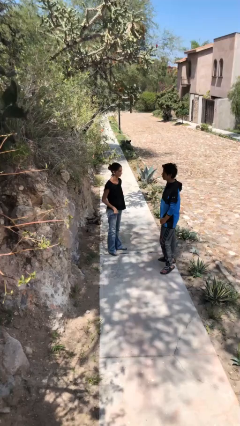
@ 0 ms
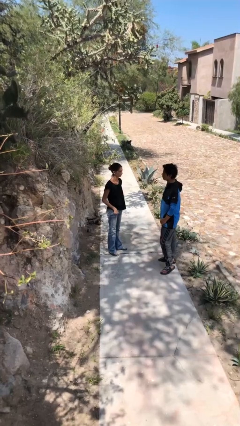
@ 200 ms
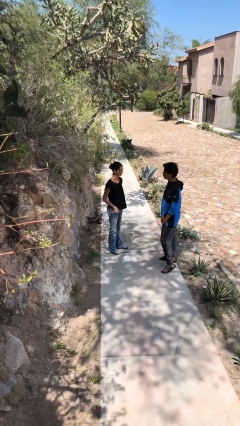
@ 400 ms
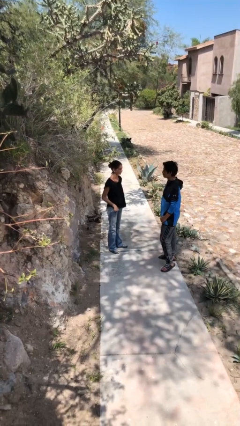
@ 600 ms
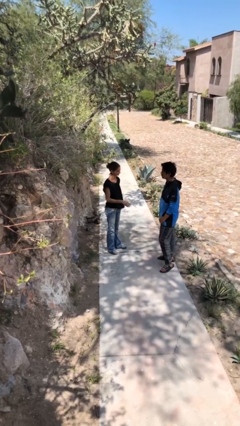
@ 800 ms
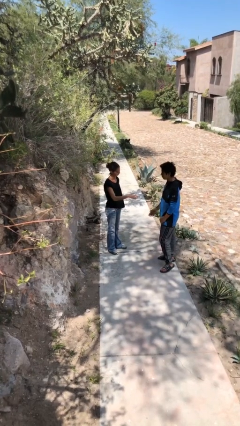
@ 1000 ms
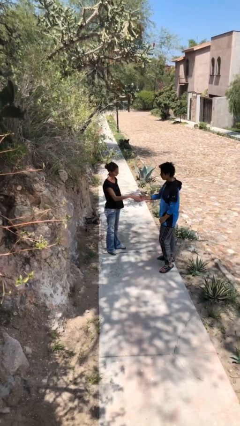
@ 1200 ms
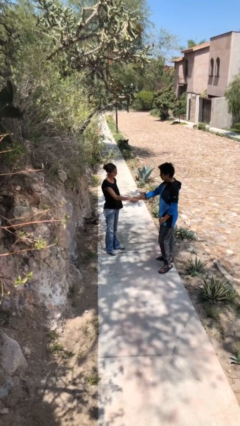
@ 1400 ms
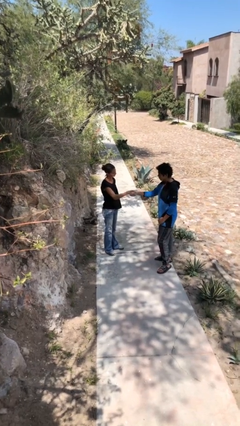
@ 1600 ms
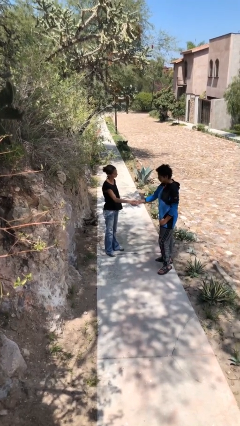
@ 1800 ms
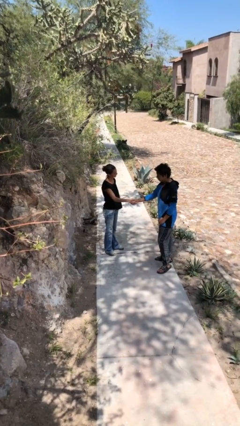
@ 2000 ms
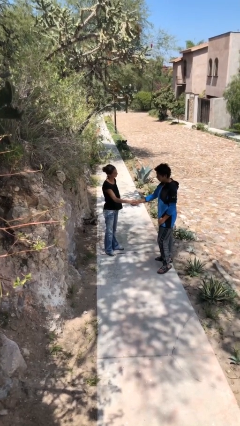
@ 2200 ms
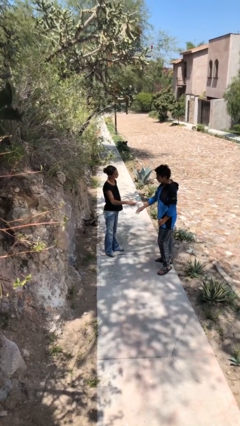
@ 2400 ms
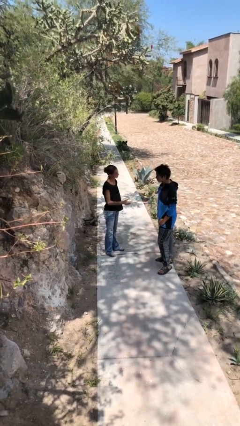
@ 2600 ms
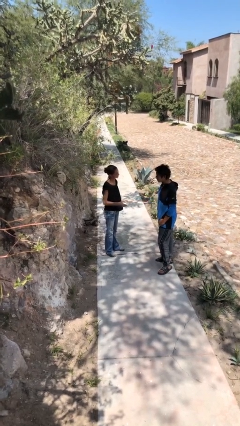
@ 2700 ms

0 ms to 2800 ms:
person shakes hand

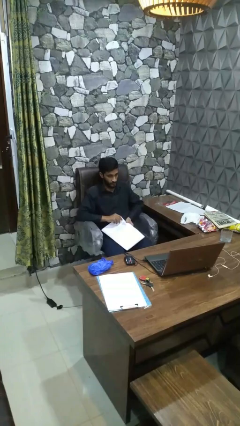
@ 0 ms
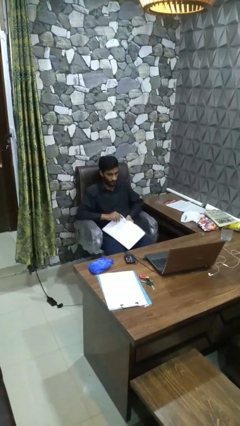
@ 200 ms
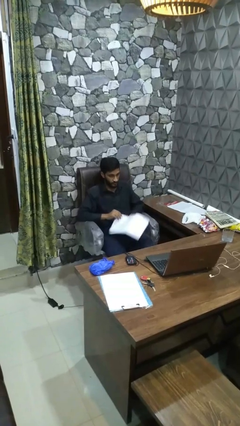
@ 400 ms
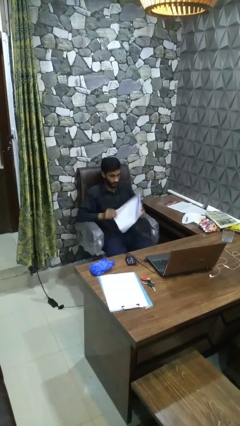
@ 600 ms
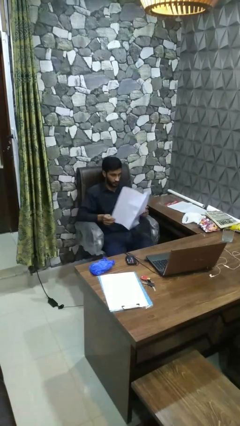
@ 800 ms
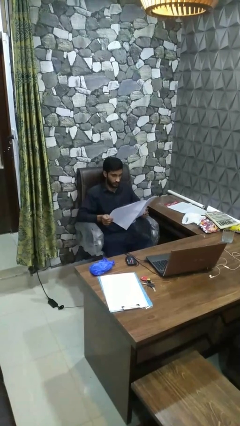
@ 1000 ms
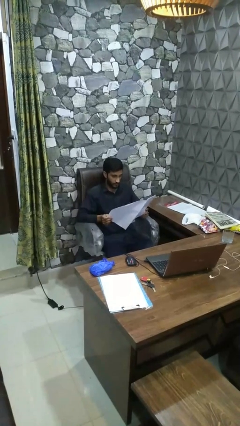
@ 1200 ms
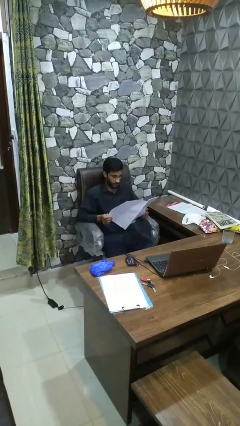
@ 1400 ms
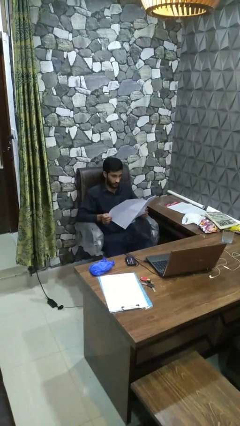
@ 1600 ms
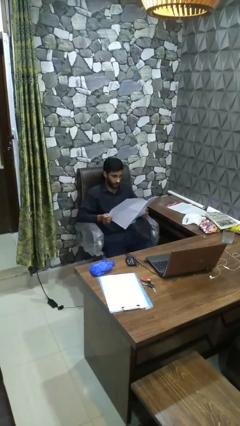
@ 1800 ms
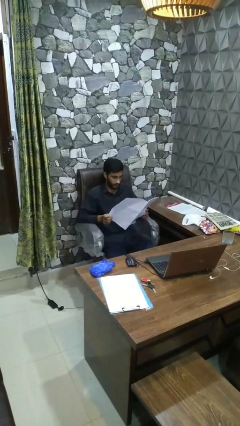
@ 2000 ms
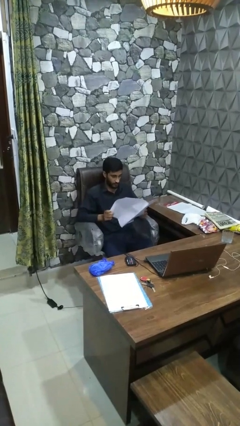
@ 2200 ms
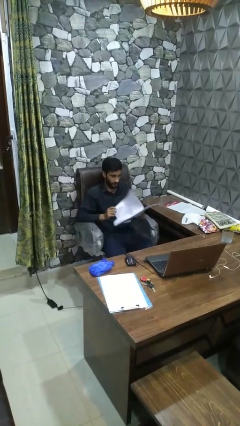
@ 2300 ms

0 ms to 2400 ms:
person reads magazine

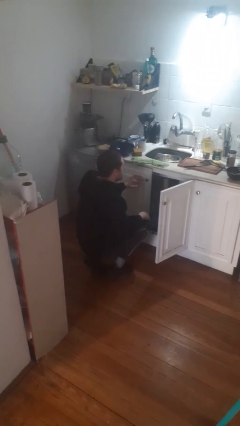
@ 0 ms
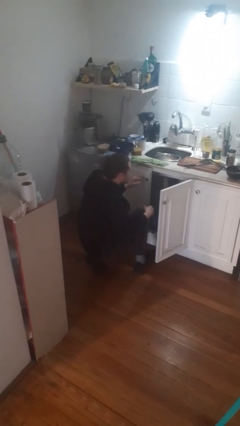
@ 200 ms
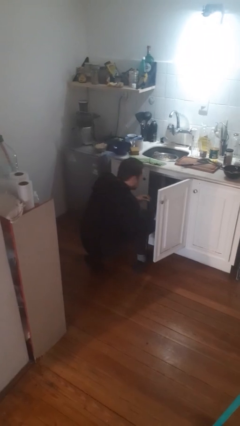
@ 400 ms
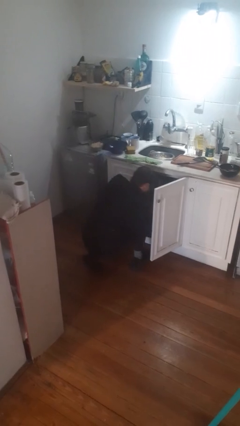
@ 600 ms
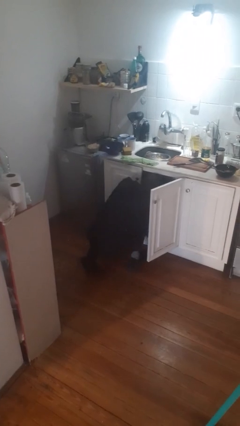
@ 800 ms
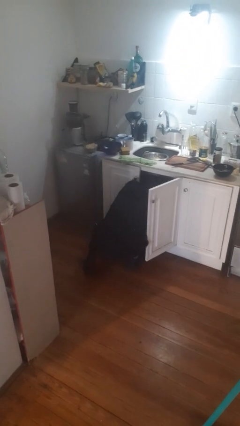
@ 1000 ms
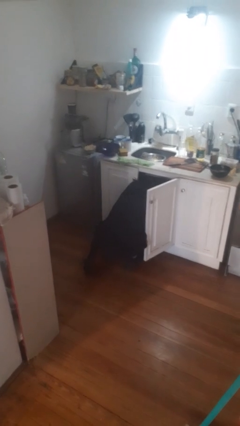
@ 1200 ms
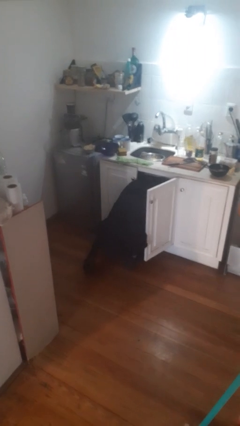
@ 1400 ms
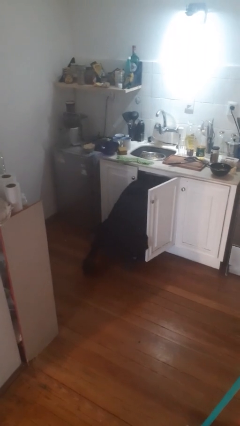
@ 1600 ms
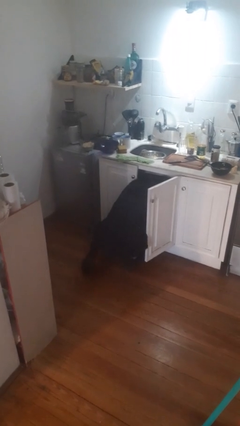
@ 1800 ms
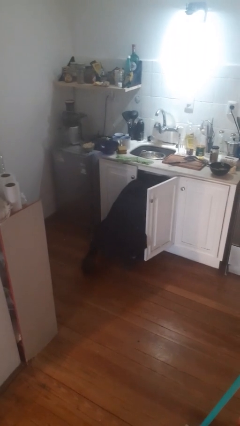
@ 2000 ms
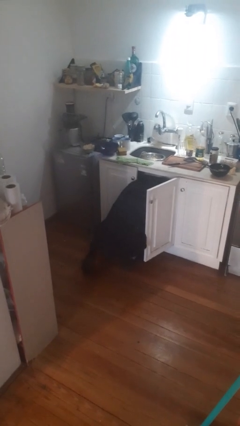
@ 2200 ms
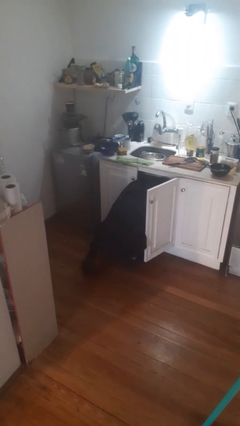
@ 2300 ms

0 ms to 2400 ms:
person searches in cabinet

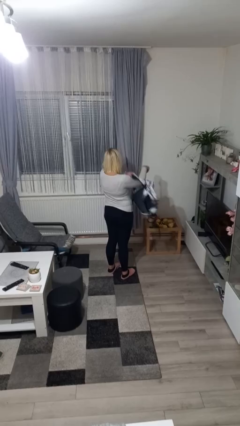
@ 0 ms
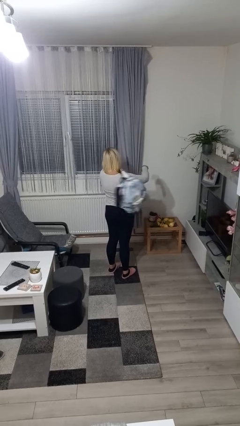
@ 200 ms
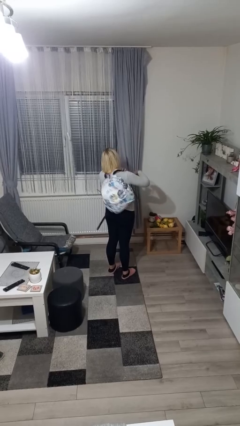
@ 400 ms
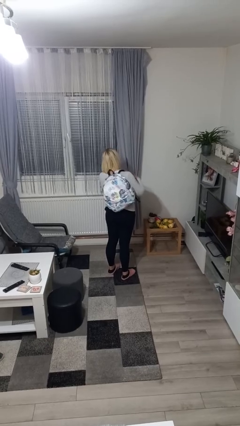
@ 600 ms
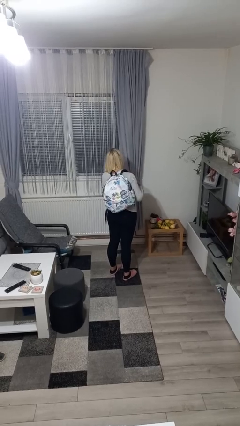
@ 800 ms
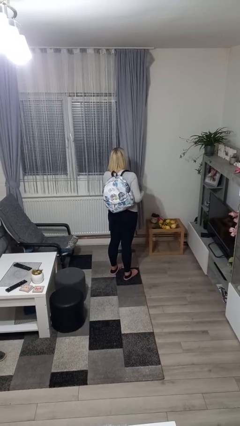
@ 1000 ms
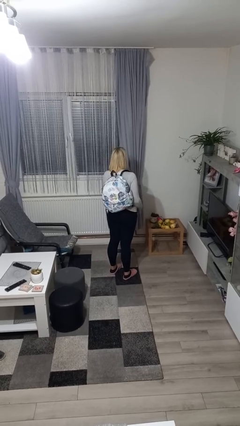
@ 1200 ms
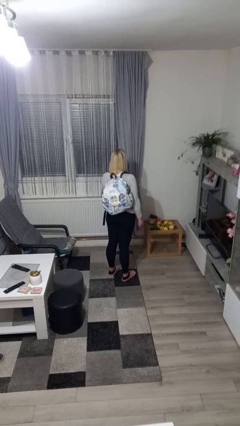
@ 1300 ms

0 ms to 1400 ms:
person puts on backpack

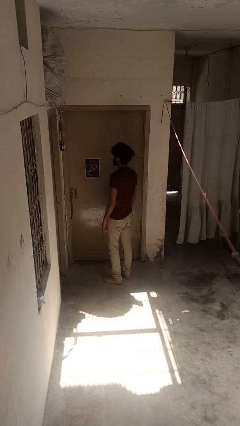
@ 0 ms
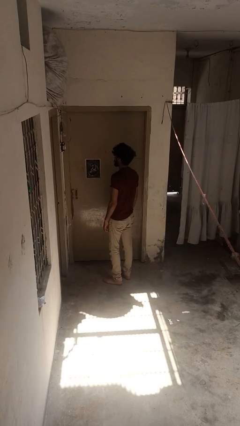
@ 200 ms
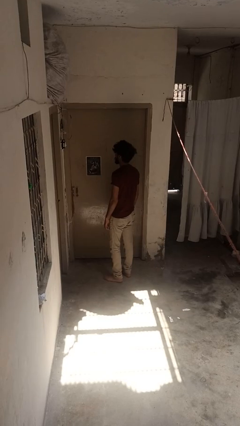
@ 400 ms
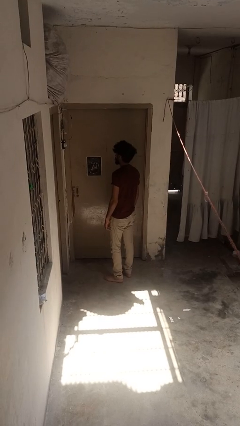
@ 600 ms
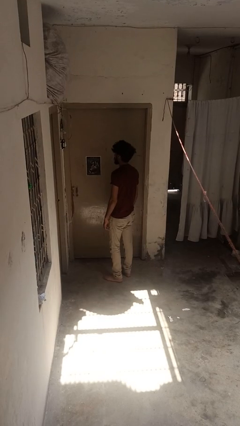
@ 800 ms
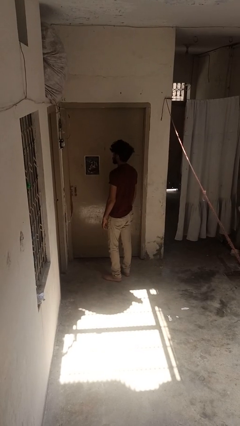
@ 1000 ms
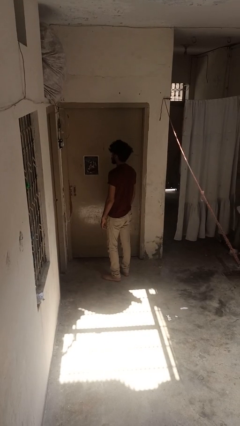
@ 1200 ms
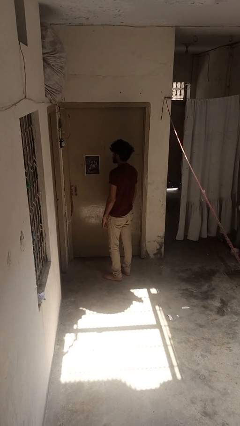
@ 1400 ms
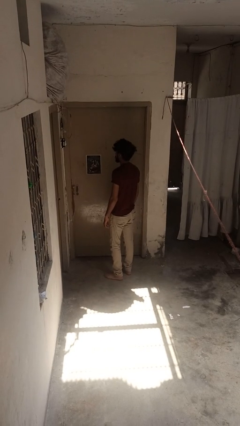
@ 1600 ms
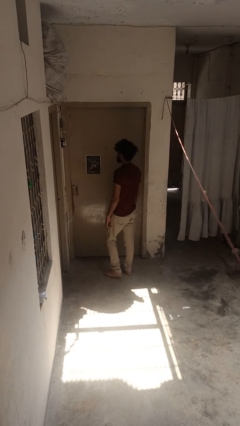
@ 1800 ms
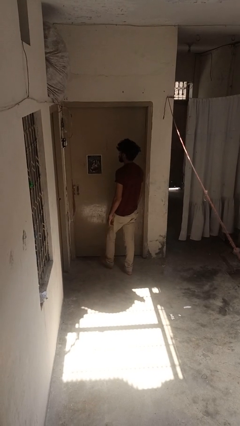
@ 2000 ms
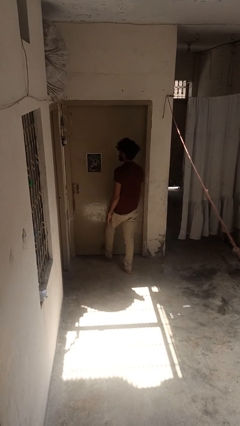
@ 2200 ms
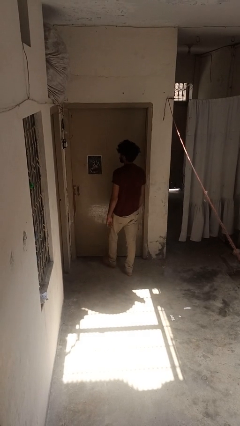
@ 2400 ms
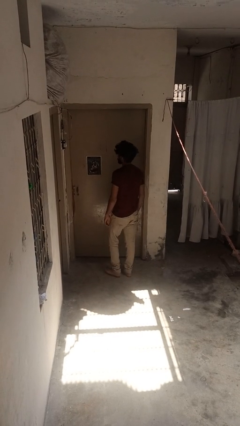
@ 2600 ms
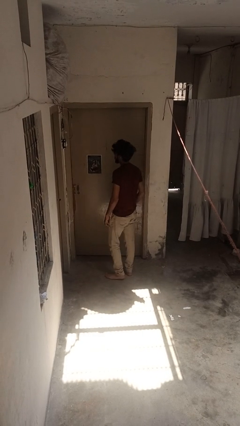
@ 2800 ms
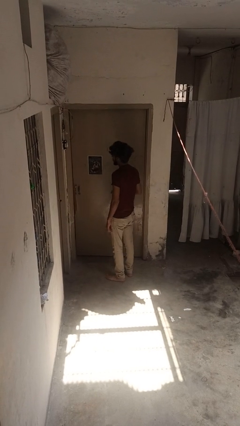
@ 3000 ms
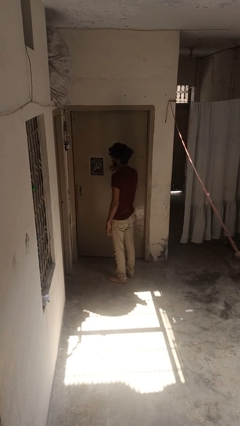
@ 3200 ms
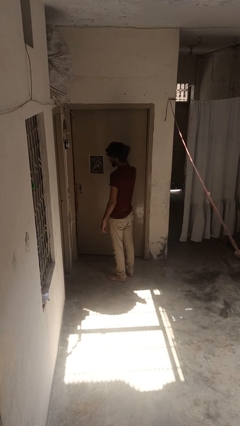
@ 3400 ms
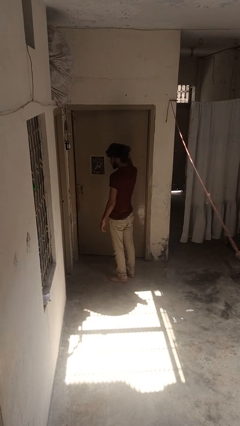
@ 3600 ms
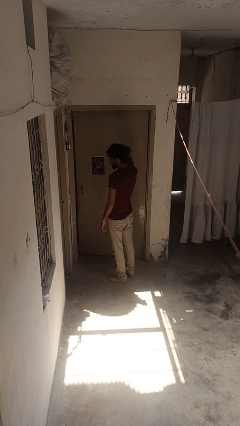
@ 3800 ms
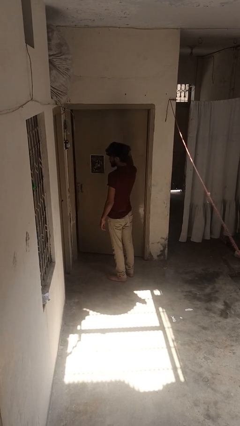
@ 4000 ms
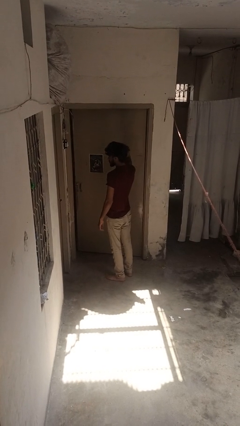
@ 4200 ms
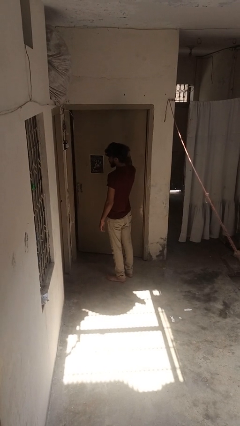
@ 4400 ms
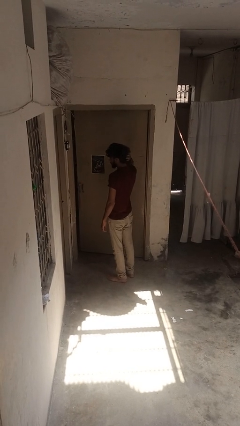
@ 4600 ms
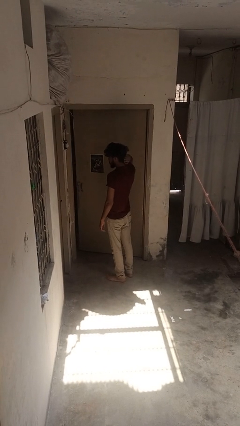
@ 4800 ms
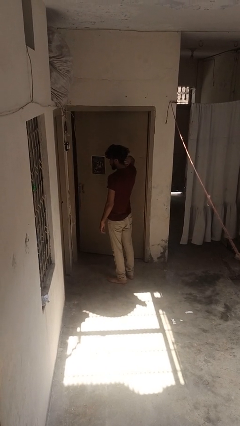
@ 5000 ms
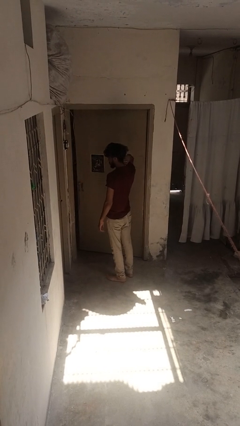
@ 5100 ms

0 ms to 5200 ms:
person opens facility door

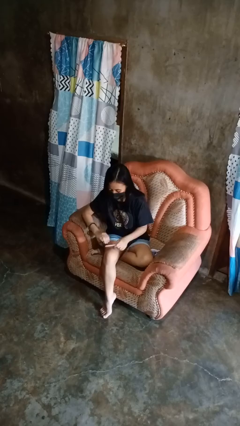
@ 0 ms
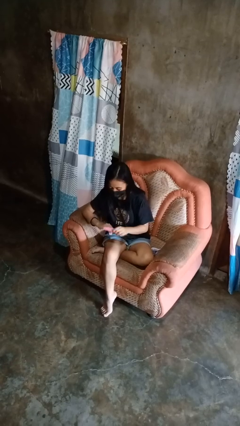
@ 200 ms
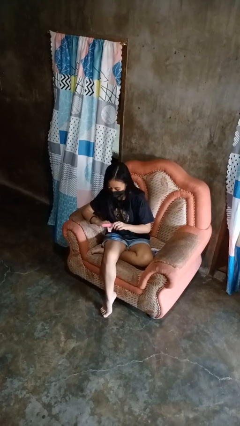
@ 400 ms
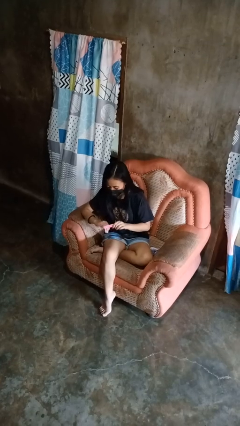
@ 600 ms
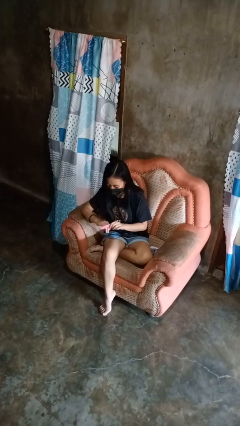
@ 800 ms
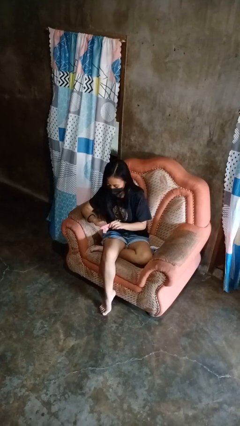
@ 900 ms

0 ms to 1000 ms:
person files fingernails

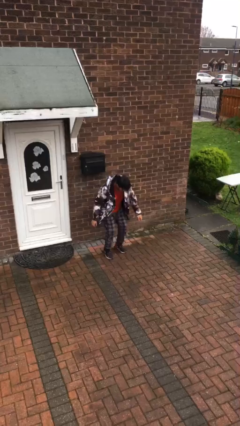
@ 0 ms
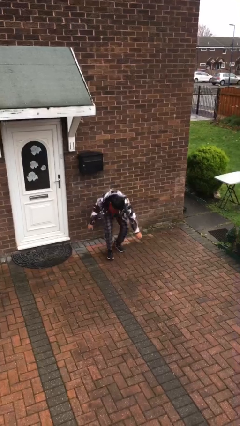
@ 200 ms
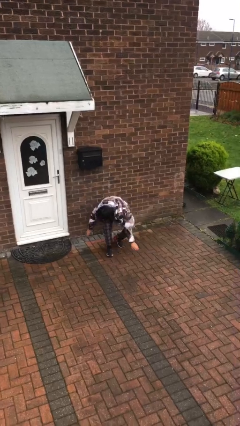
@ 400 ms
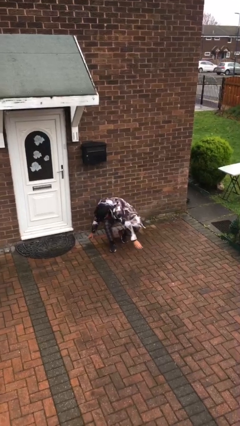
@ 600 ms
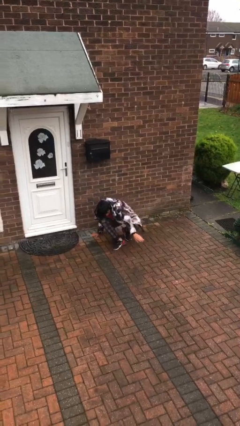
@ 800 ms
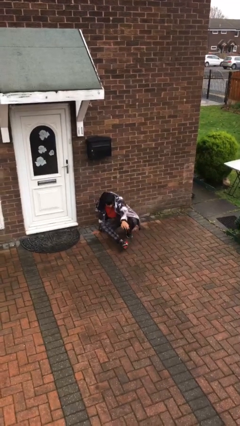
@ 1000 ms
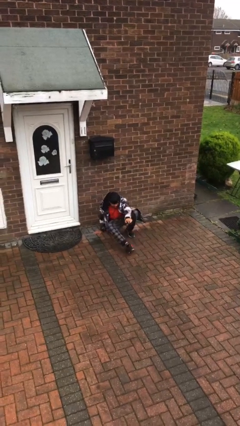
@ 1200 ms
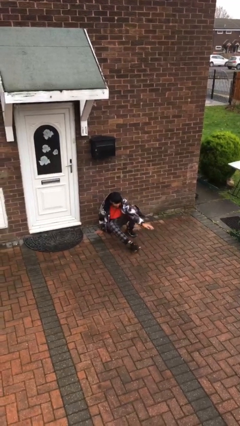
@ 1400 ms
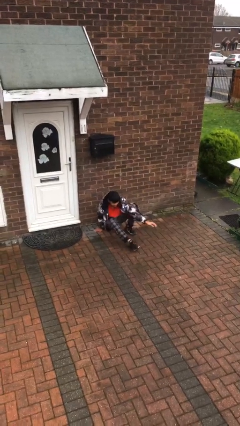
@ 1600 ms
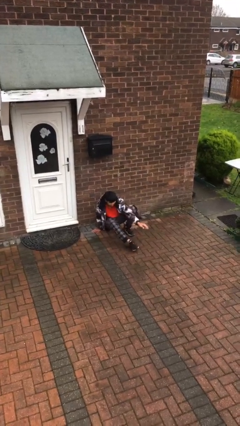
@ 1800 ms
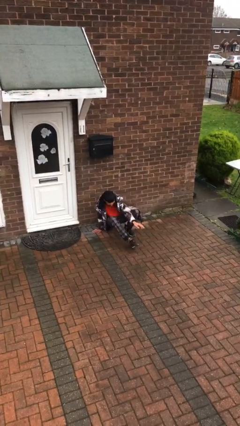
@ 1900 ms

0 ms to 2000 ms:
person sits down
